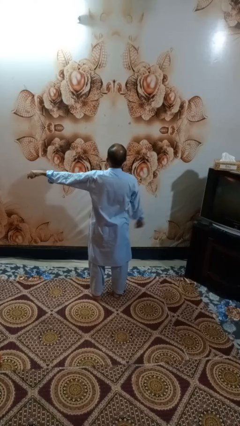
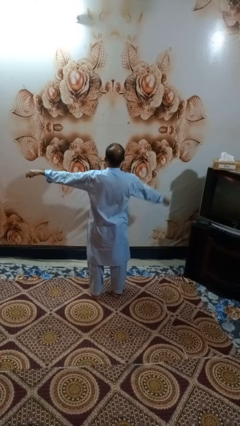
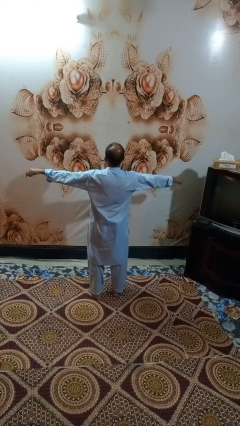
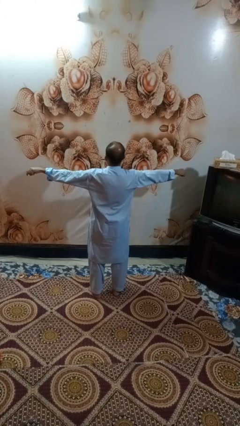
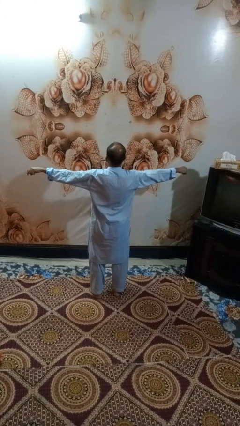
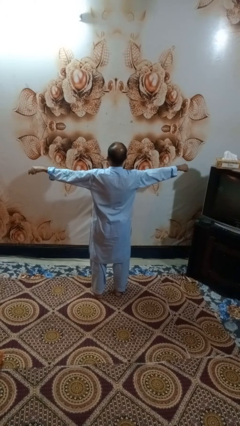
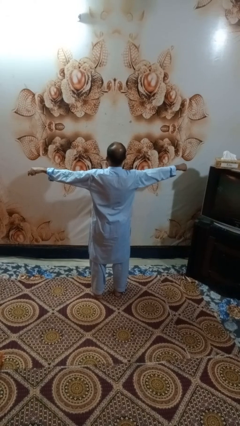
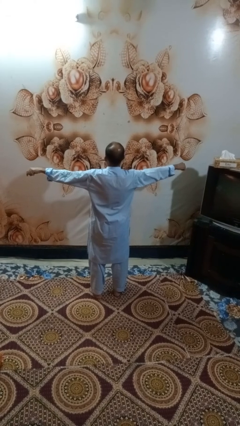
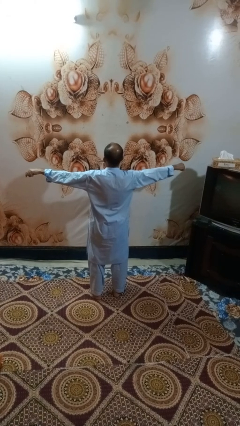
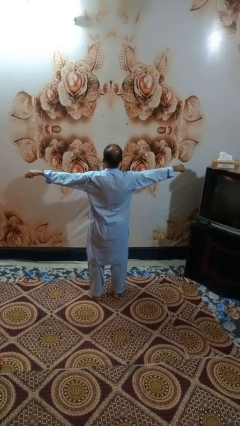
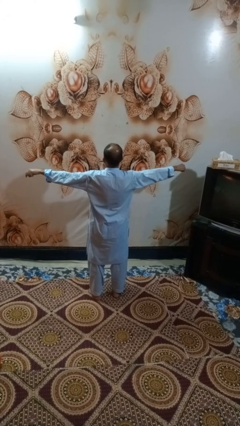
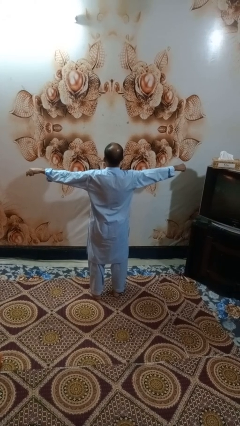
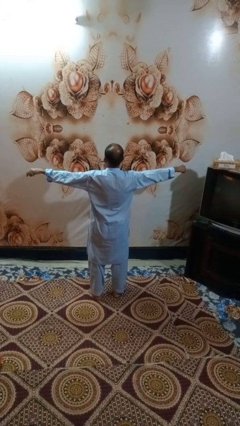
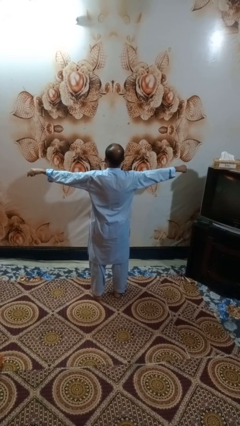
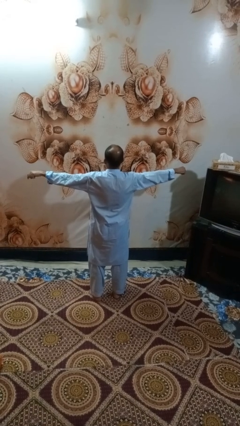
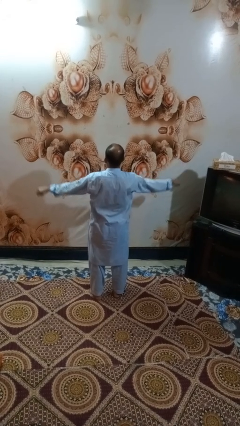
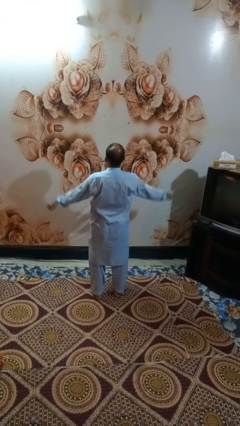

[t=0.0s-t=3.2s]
person gestures swipe right

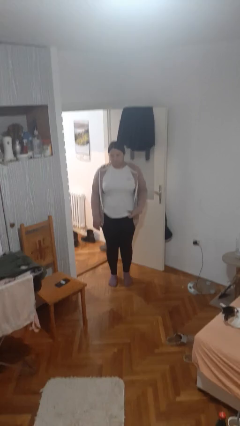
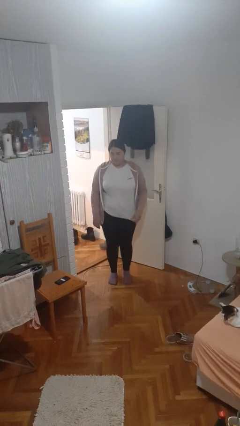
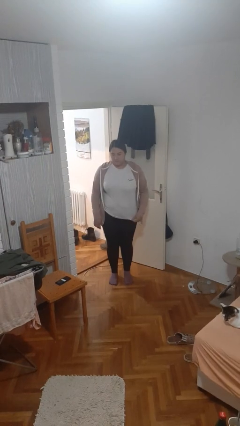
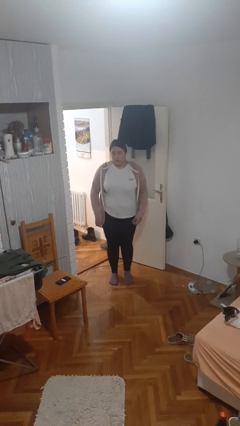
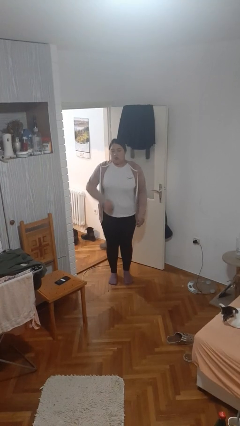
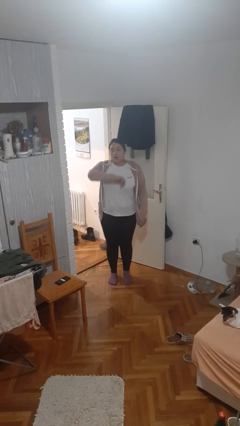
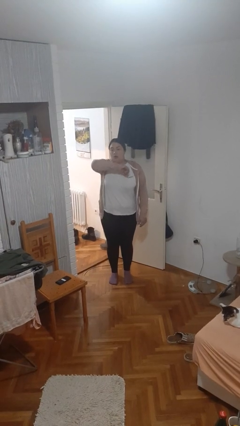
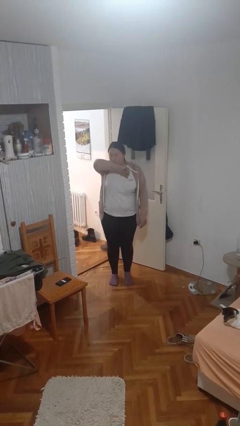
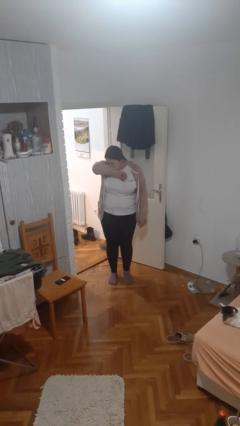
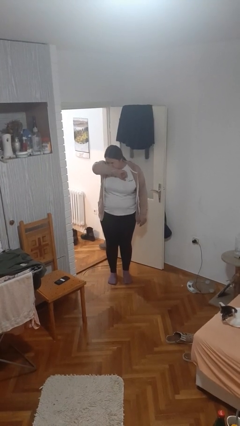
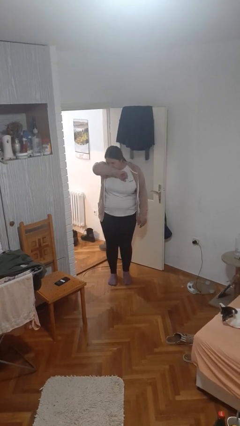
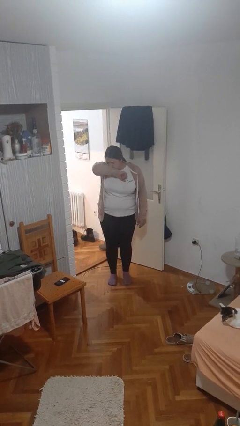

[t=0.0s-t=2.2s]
person sneezes into arm

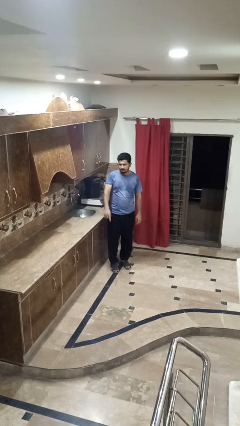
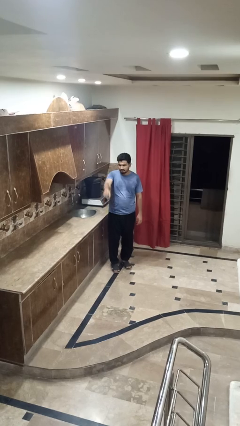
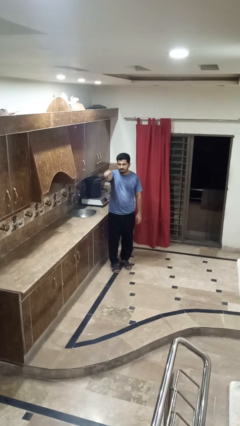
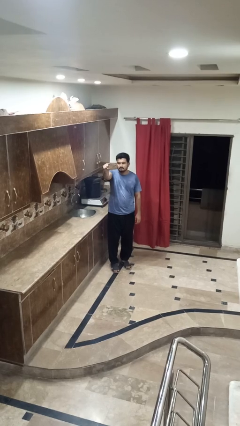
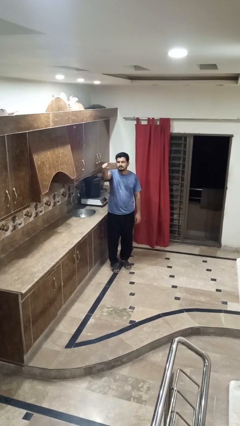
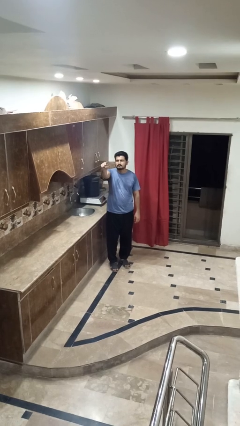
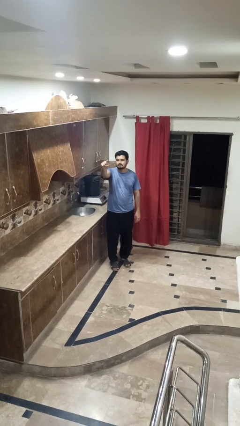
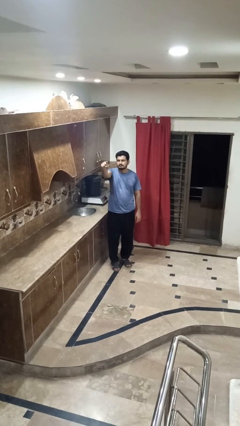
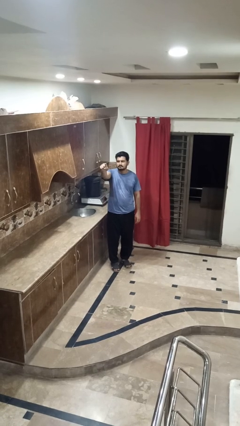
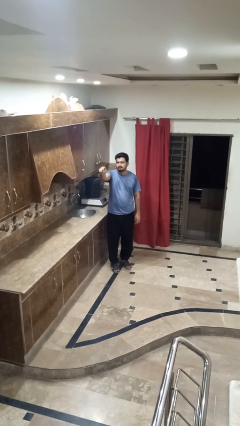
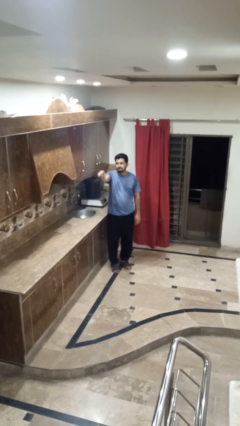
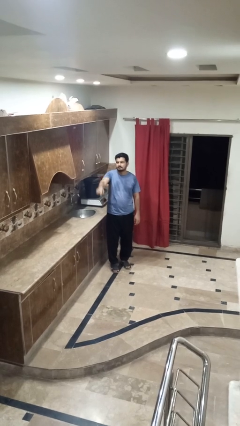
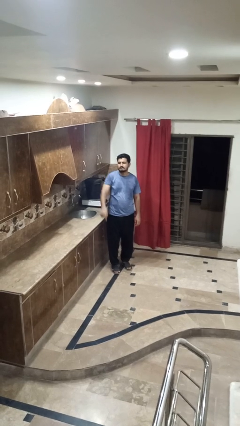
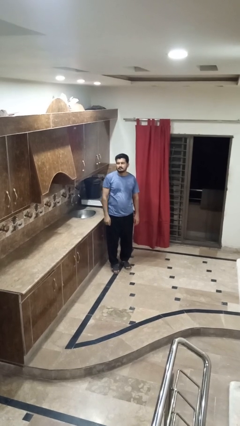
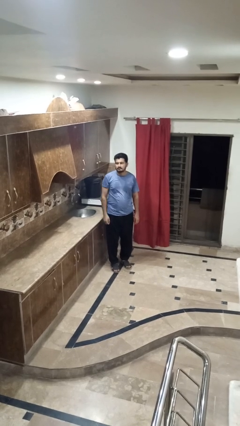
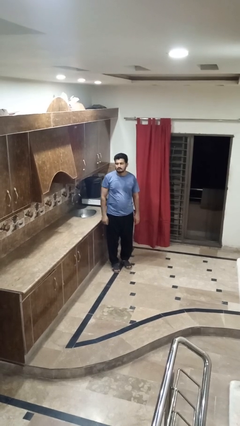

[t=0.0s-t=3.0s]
person points at person

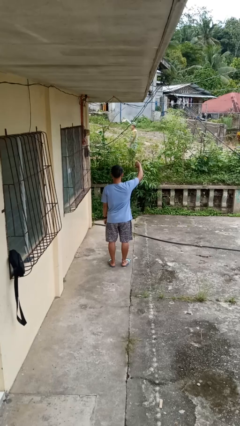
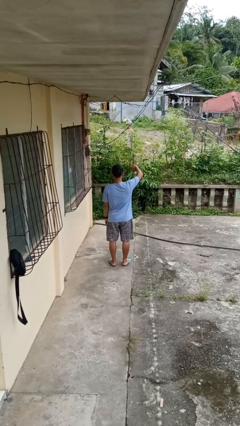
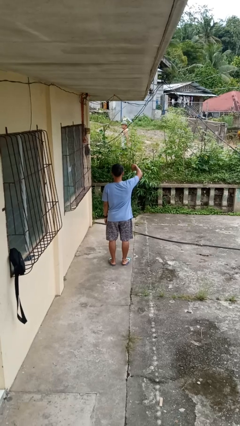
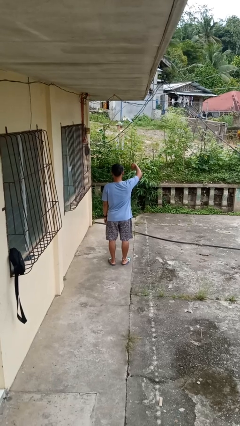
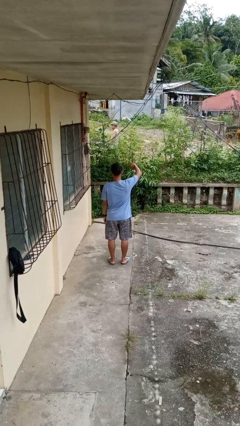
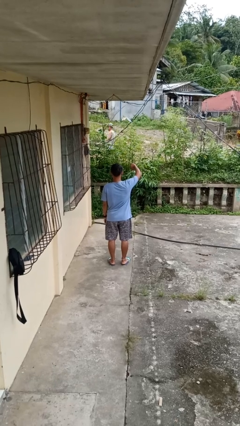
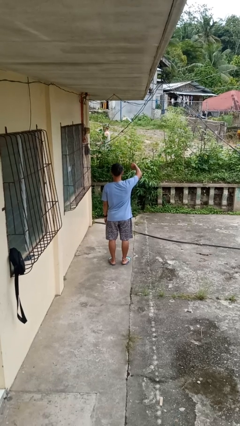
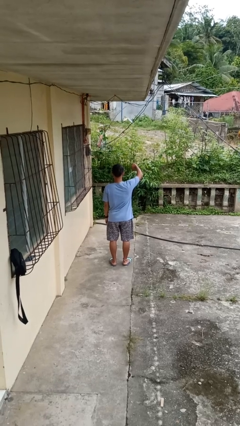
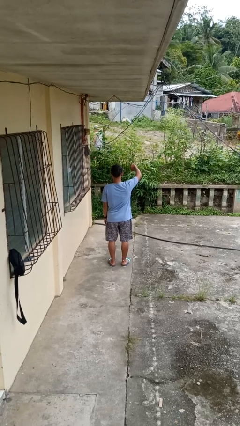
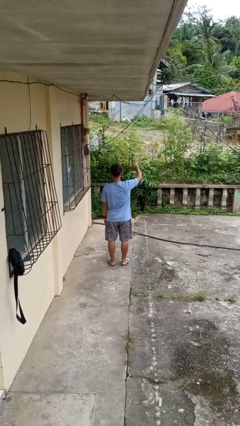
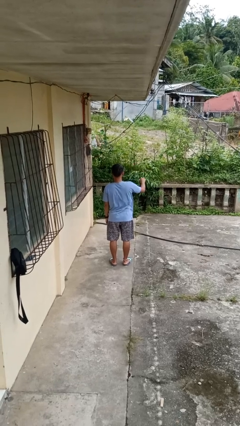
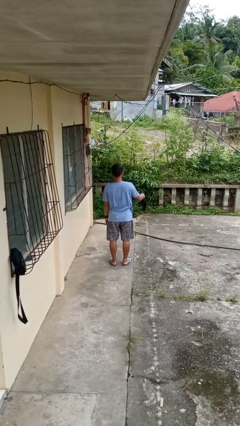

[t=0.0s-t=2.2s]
person gestures thumbs down

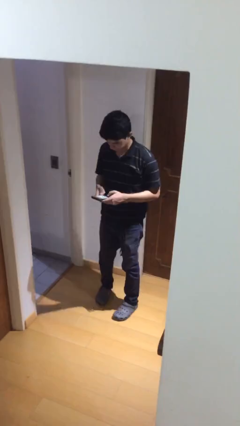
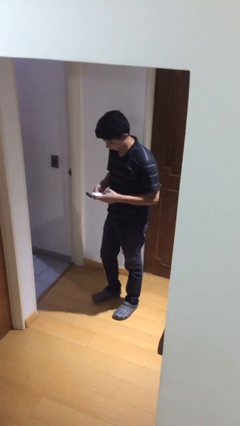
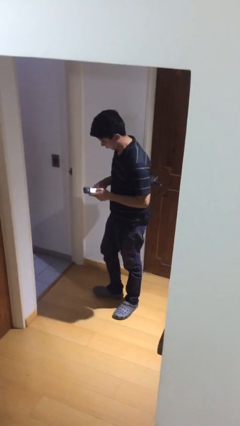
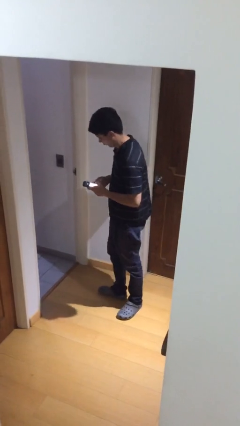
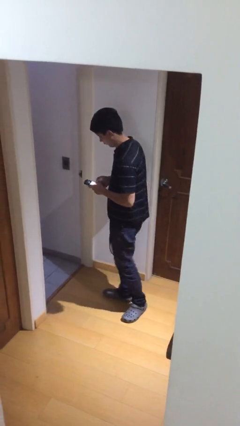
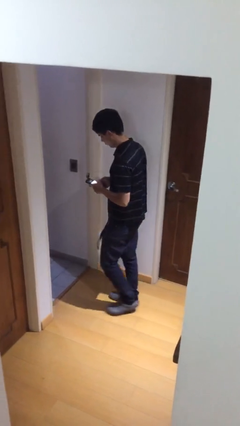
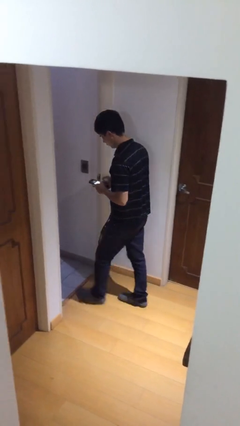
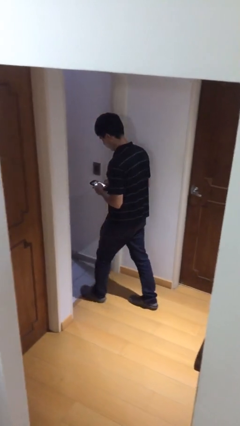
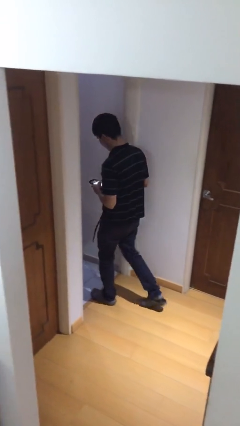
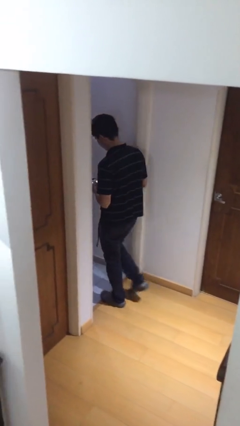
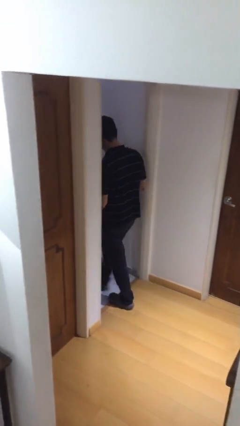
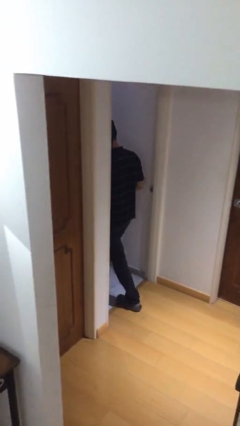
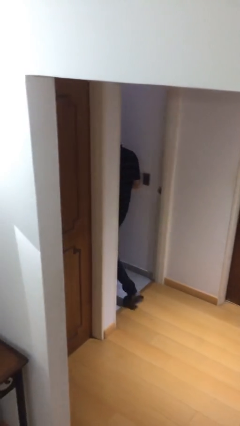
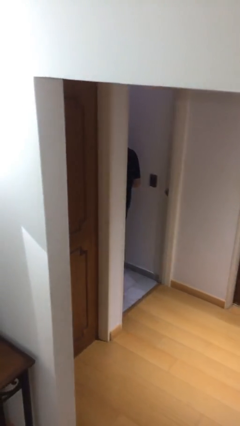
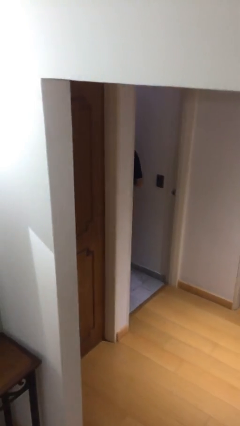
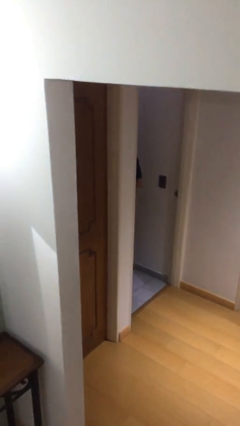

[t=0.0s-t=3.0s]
person exits scene through structure

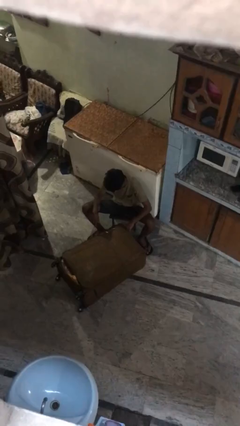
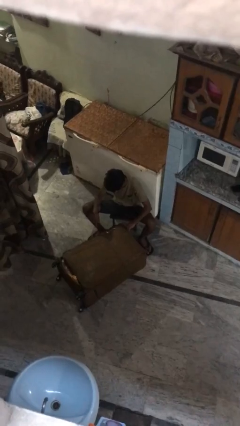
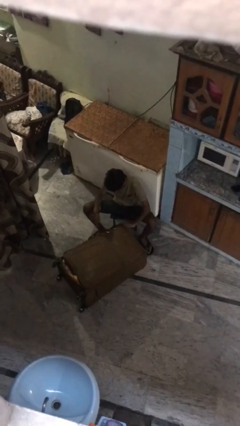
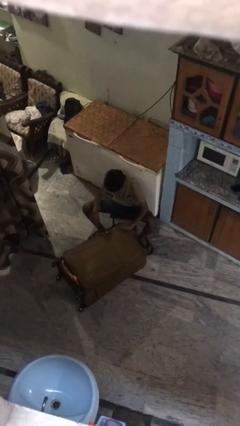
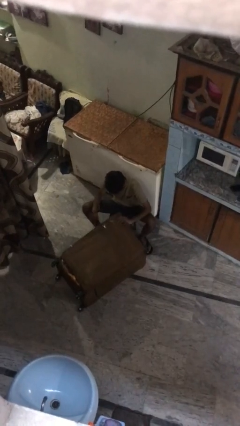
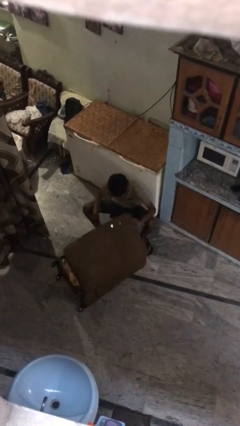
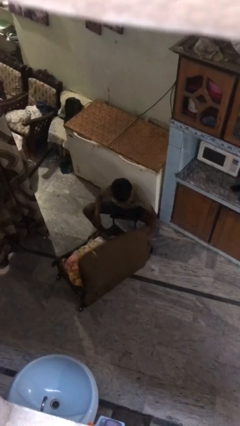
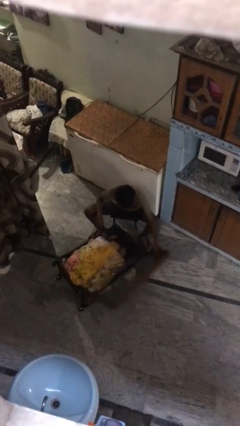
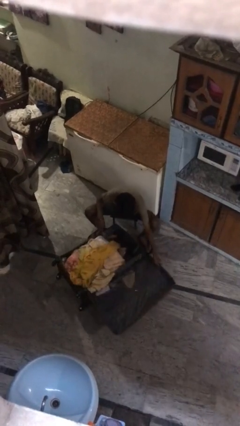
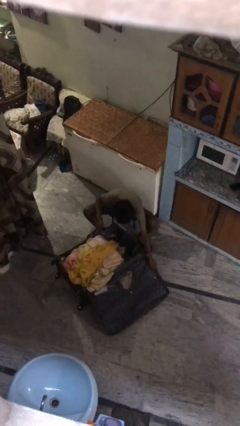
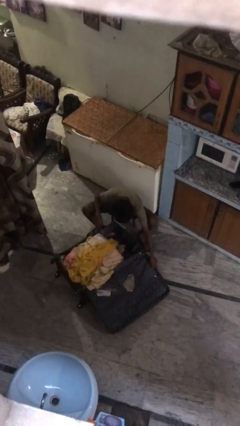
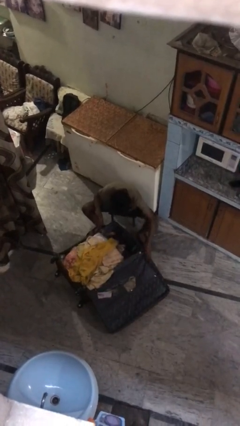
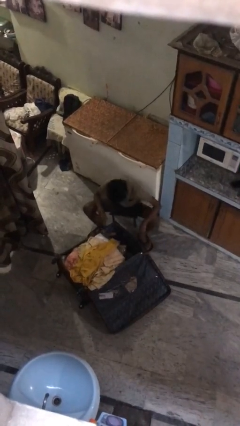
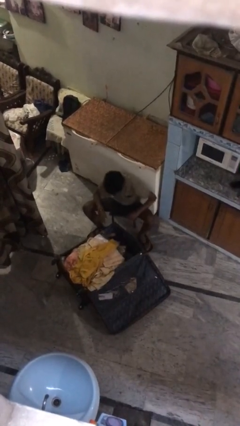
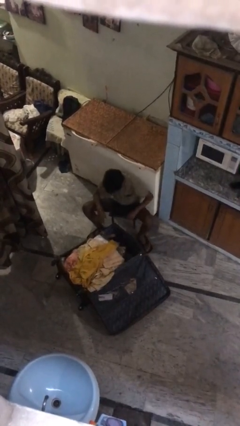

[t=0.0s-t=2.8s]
person opens suitcase

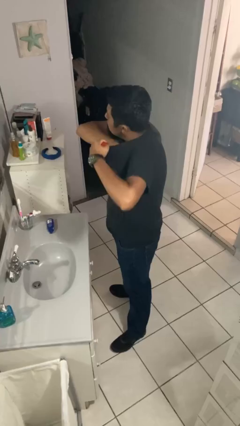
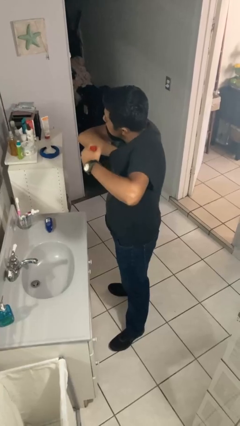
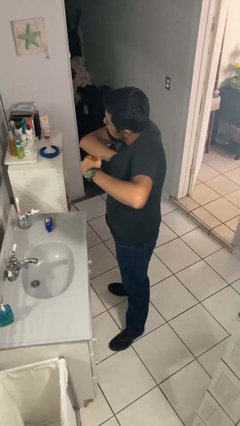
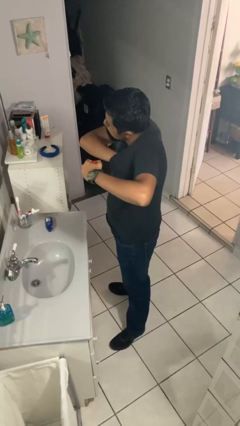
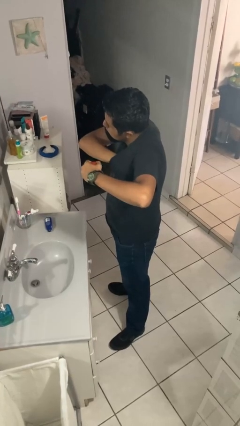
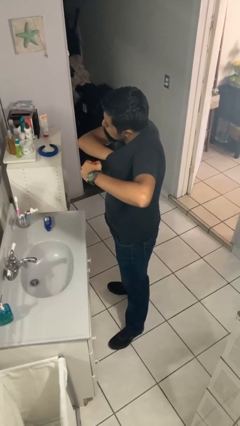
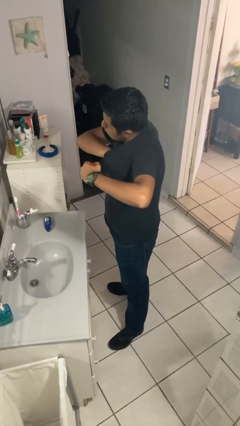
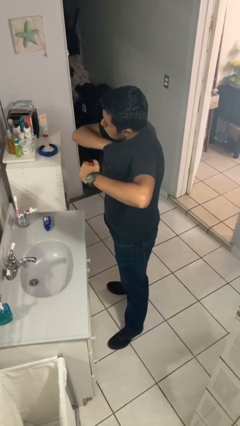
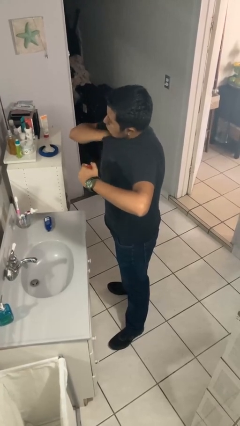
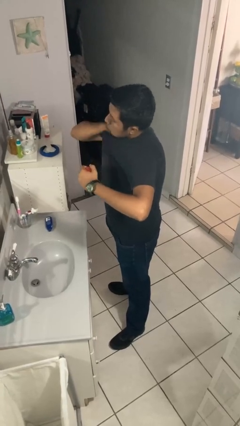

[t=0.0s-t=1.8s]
person applies deodorant
